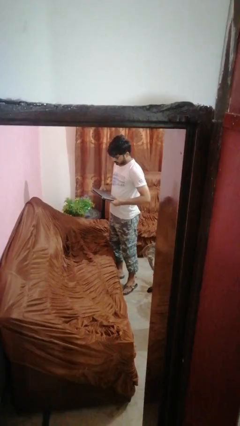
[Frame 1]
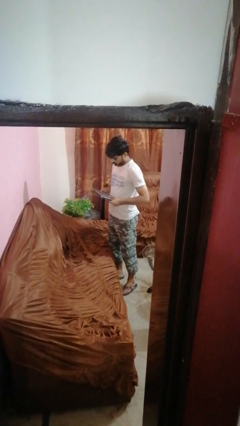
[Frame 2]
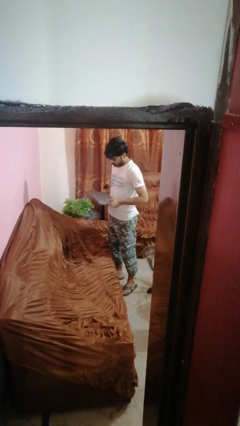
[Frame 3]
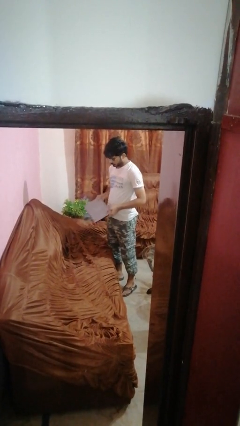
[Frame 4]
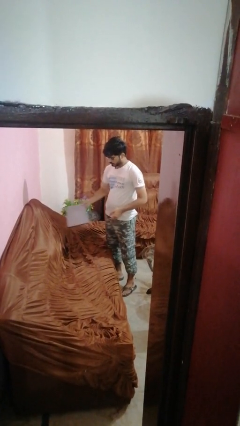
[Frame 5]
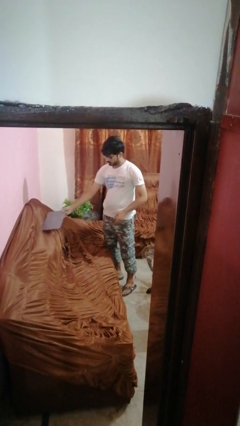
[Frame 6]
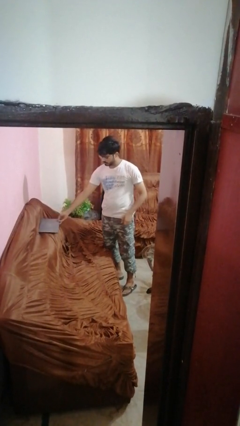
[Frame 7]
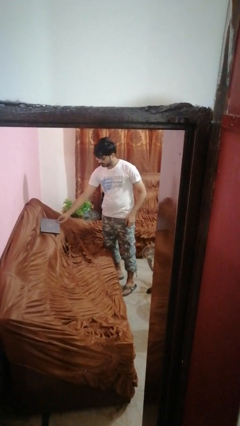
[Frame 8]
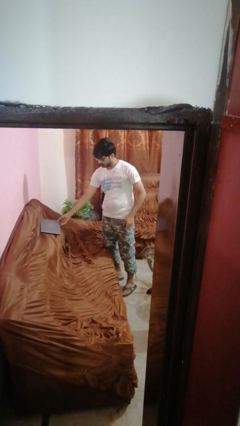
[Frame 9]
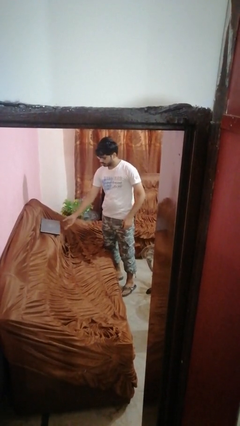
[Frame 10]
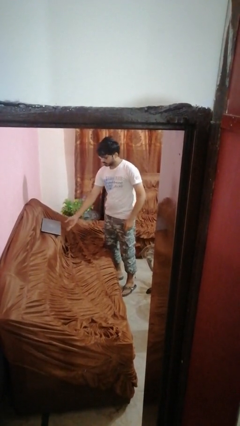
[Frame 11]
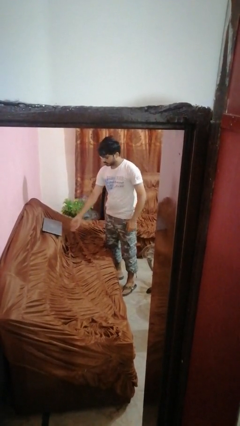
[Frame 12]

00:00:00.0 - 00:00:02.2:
person puts down object on couch

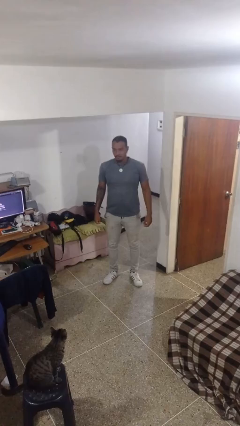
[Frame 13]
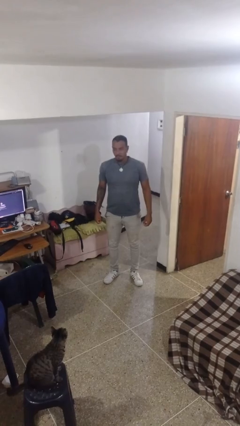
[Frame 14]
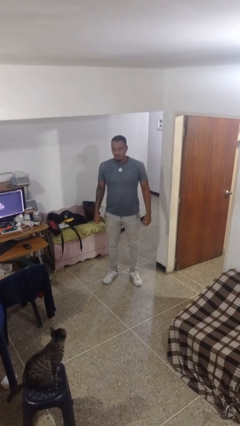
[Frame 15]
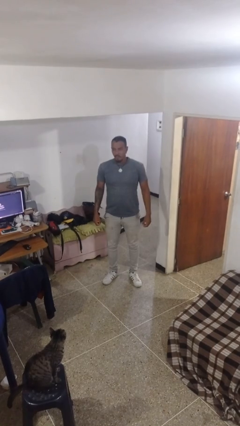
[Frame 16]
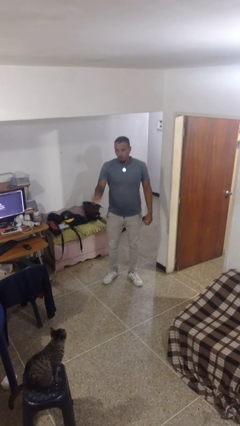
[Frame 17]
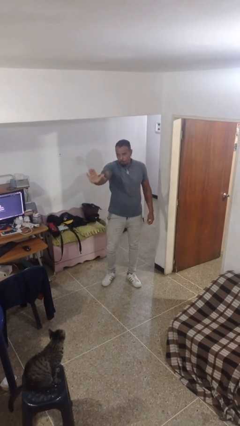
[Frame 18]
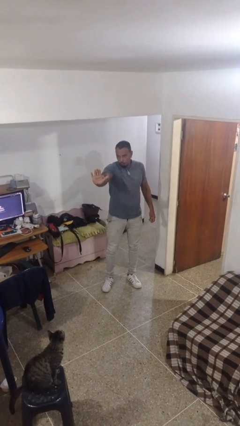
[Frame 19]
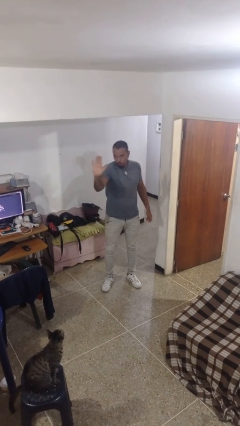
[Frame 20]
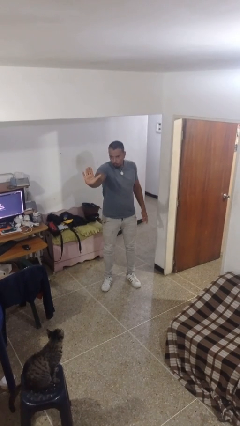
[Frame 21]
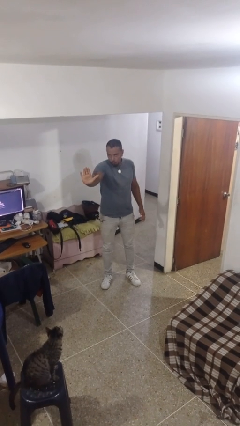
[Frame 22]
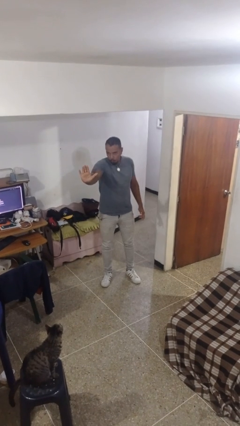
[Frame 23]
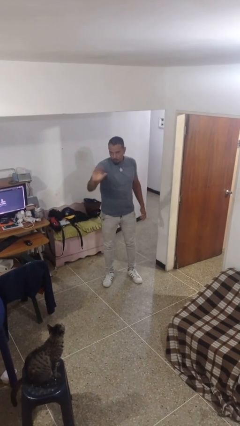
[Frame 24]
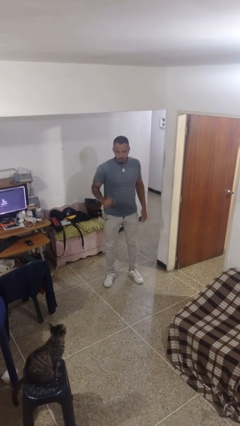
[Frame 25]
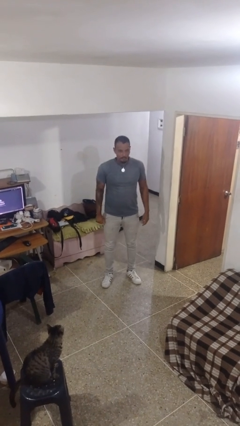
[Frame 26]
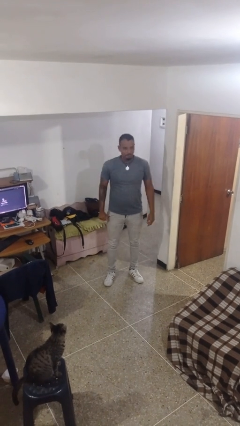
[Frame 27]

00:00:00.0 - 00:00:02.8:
person gestures stop

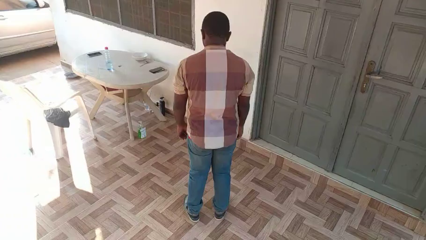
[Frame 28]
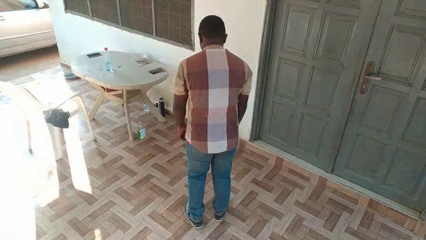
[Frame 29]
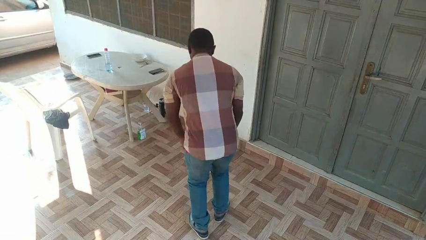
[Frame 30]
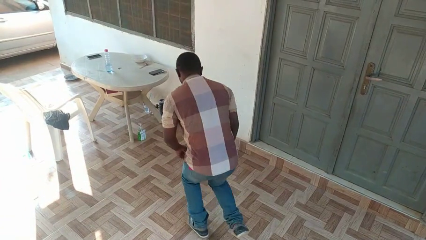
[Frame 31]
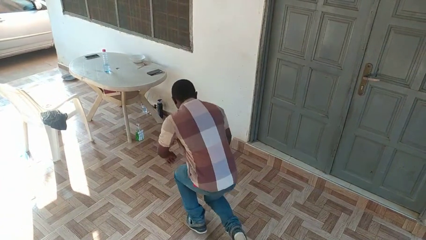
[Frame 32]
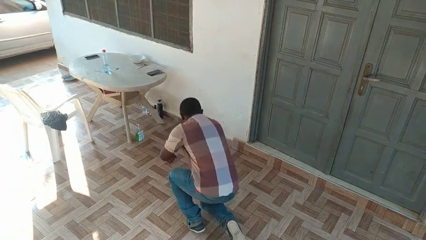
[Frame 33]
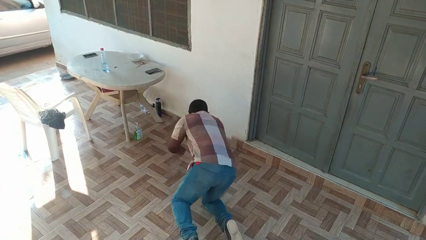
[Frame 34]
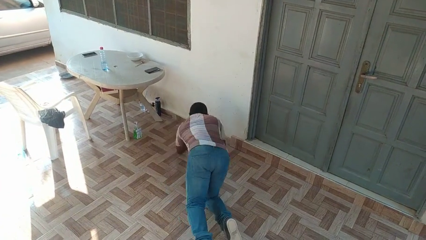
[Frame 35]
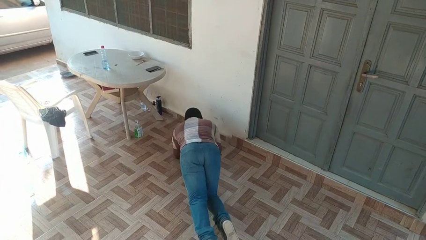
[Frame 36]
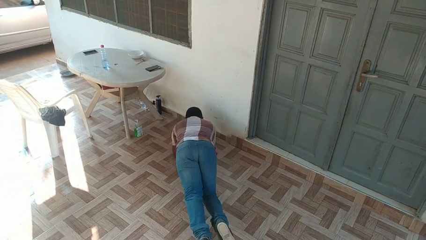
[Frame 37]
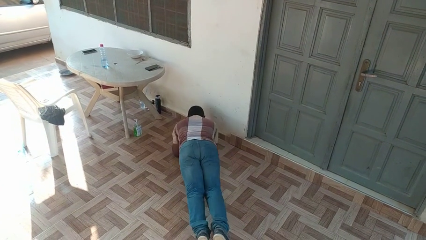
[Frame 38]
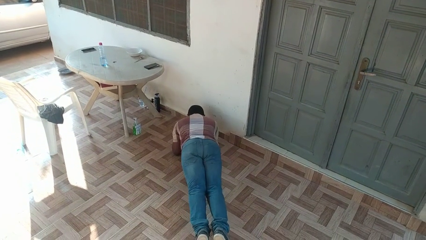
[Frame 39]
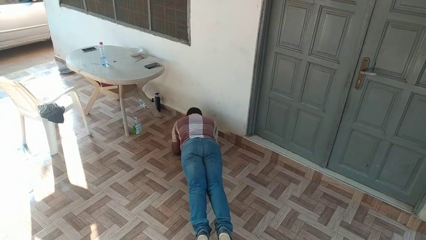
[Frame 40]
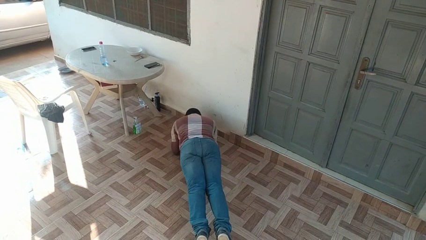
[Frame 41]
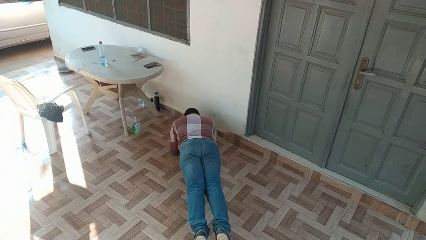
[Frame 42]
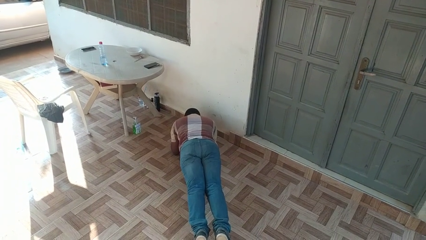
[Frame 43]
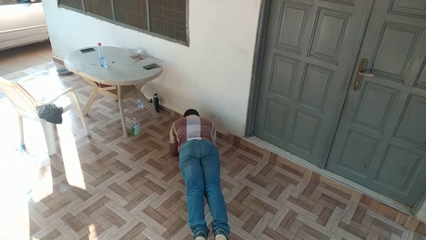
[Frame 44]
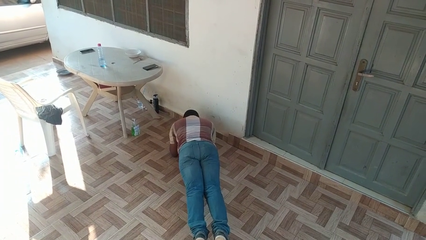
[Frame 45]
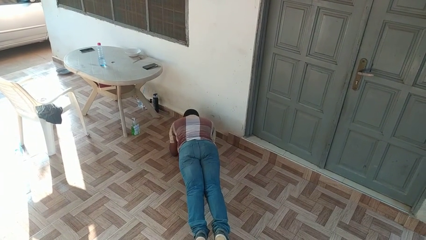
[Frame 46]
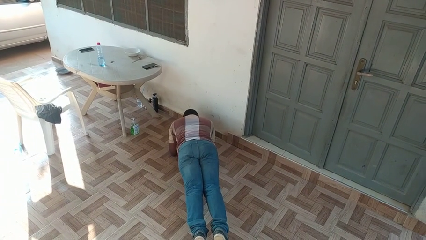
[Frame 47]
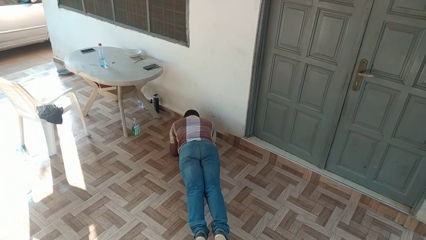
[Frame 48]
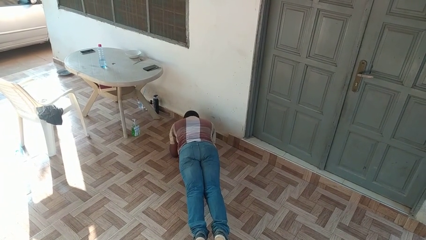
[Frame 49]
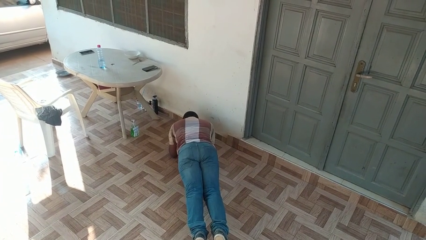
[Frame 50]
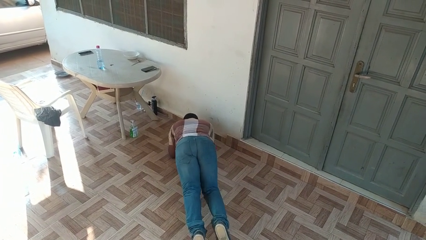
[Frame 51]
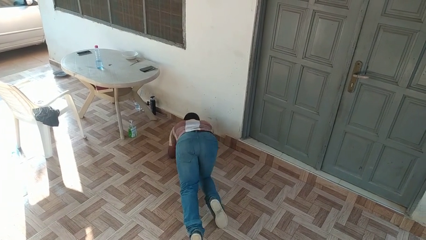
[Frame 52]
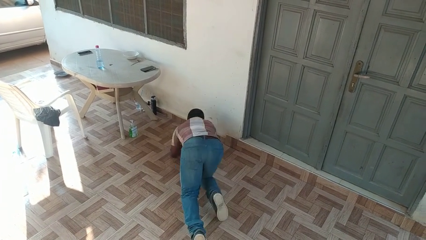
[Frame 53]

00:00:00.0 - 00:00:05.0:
person exercises with plank

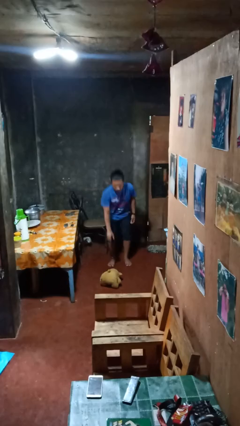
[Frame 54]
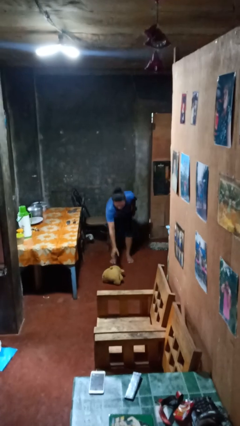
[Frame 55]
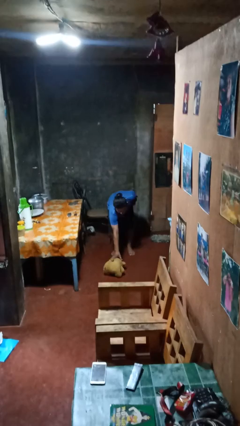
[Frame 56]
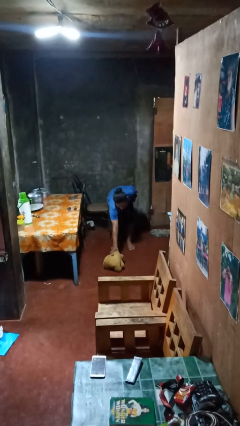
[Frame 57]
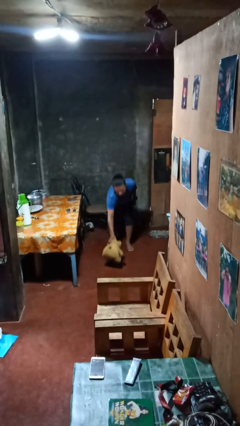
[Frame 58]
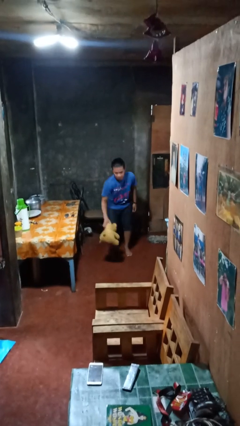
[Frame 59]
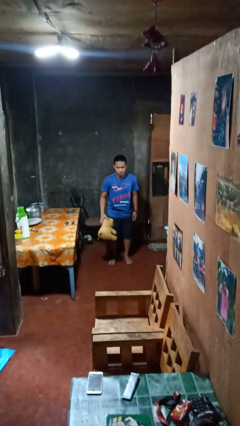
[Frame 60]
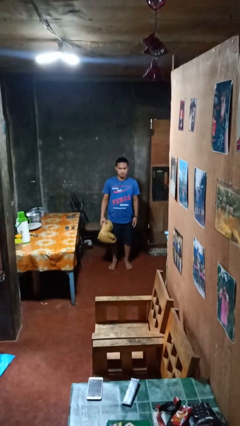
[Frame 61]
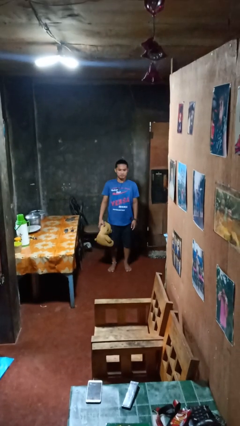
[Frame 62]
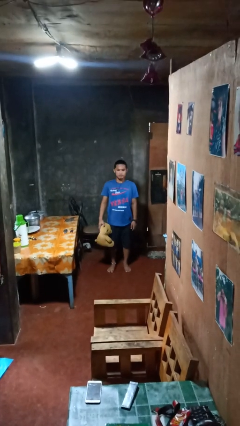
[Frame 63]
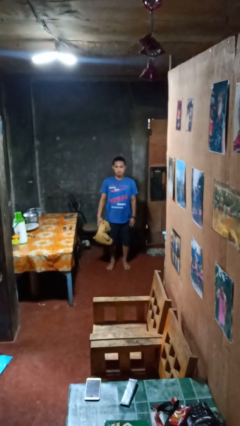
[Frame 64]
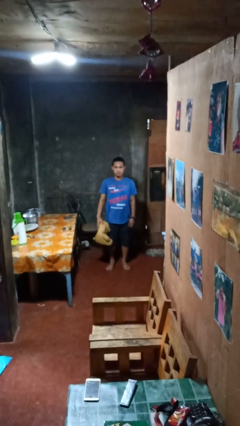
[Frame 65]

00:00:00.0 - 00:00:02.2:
person picks up object from floor

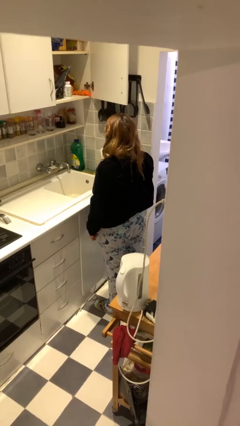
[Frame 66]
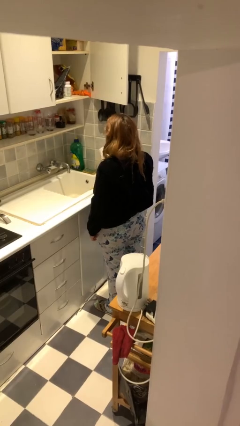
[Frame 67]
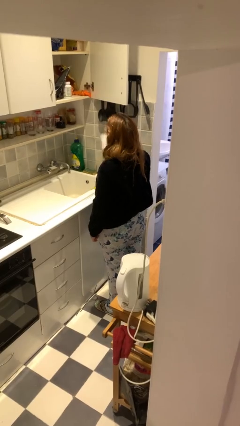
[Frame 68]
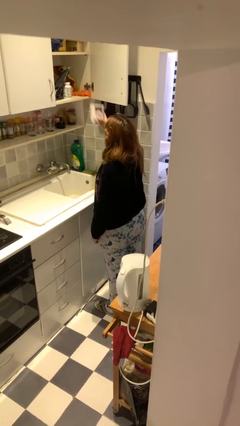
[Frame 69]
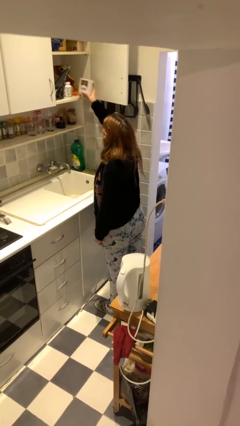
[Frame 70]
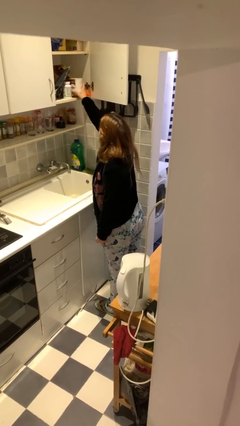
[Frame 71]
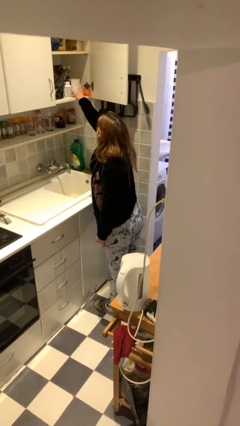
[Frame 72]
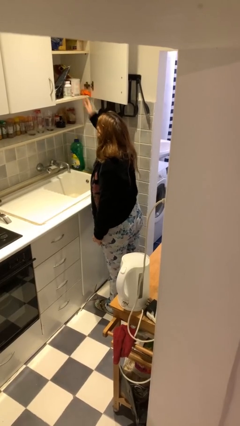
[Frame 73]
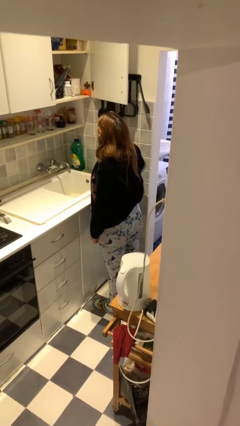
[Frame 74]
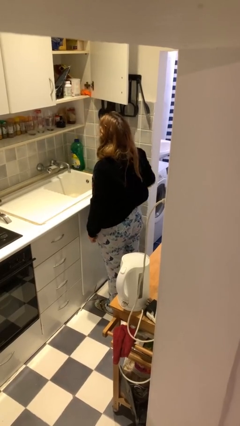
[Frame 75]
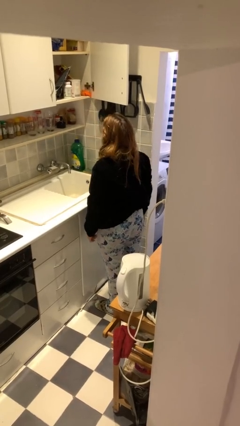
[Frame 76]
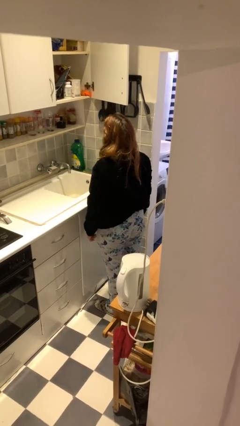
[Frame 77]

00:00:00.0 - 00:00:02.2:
person puts object in cabinet

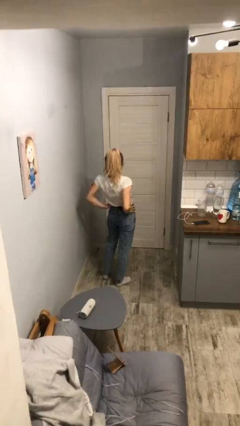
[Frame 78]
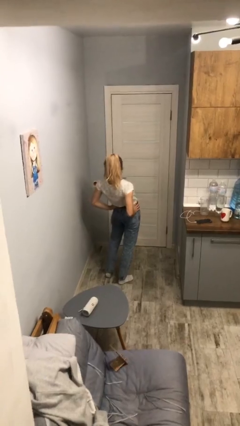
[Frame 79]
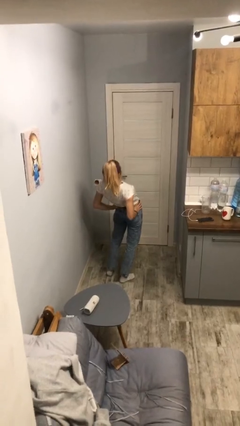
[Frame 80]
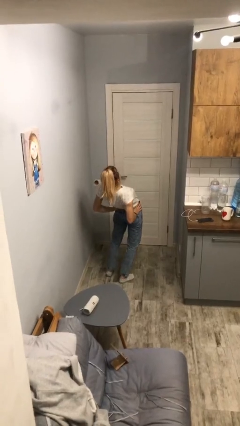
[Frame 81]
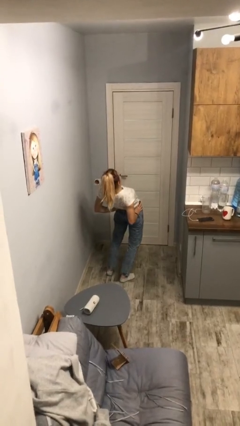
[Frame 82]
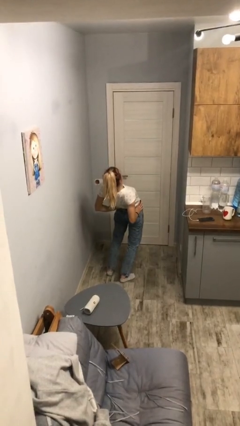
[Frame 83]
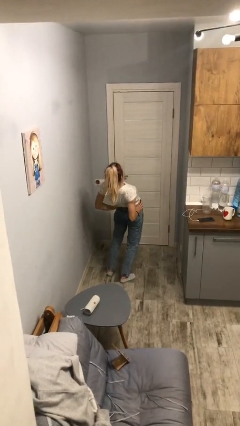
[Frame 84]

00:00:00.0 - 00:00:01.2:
person stretches back

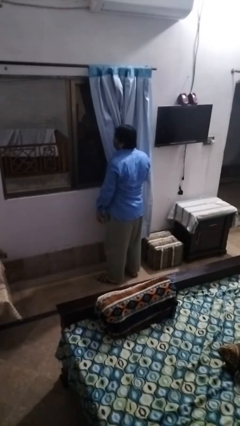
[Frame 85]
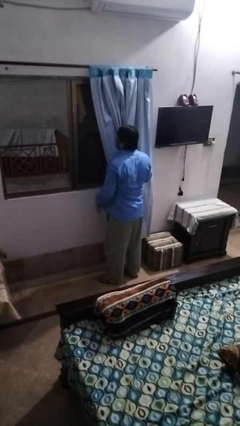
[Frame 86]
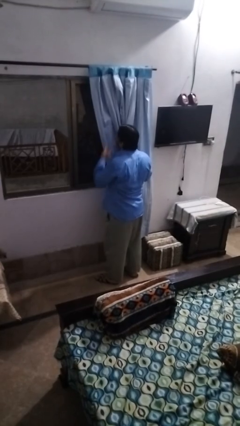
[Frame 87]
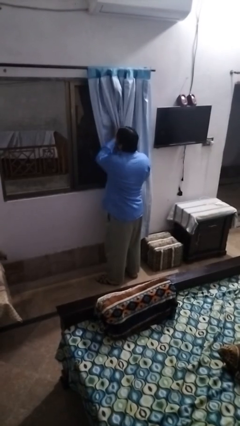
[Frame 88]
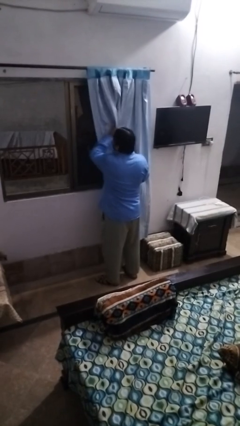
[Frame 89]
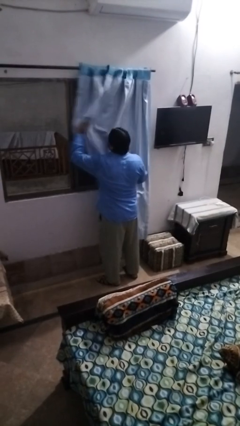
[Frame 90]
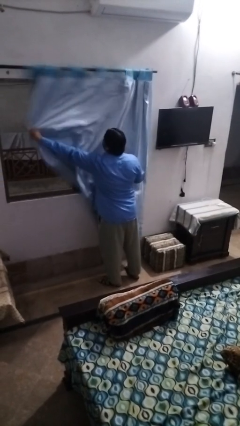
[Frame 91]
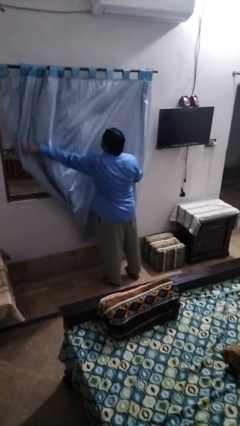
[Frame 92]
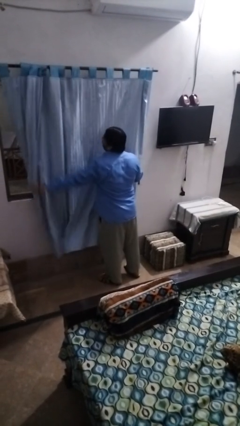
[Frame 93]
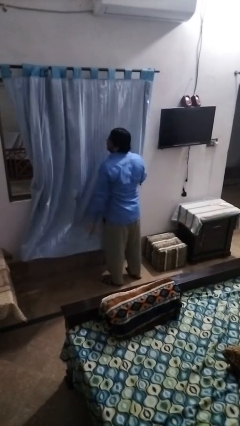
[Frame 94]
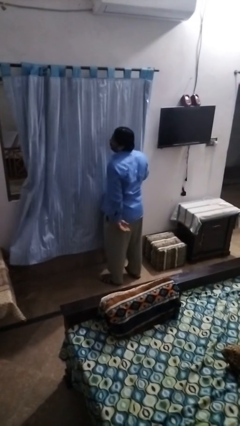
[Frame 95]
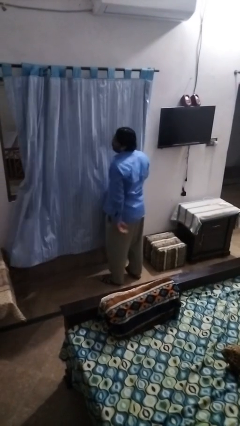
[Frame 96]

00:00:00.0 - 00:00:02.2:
person closes curtains
